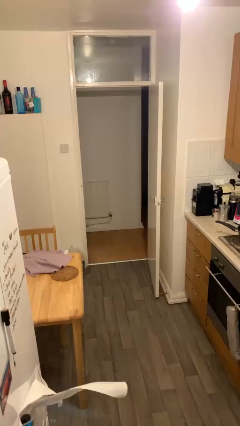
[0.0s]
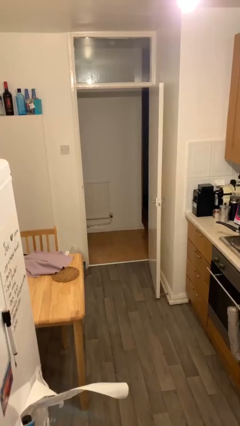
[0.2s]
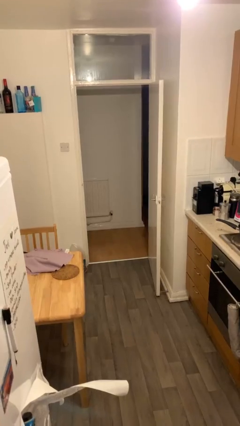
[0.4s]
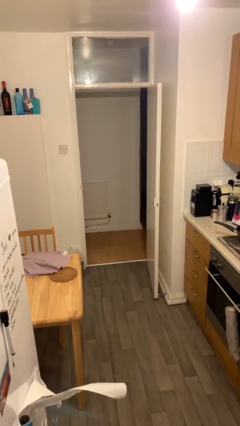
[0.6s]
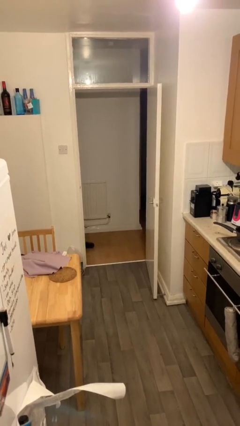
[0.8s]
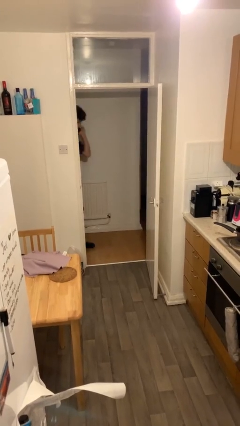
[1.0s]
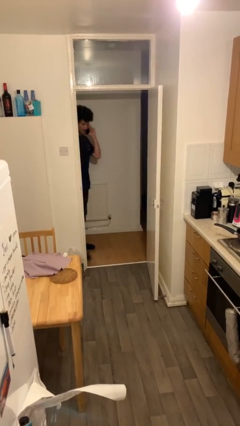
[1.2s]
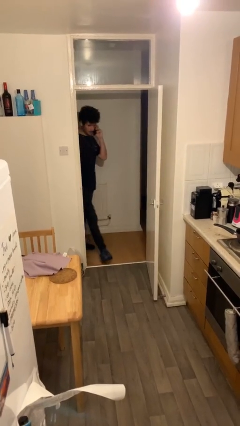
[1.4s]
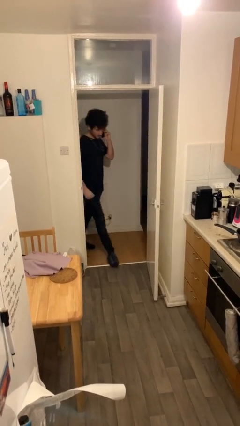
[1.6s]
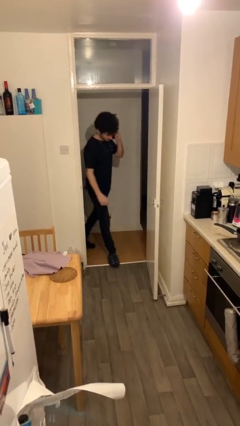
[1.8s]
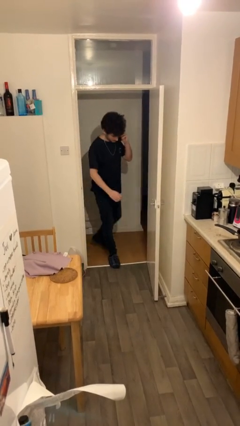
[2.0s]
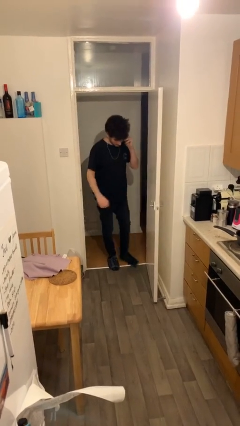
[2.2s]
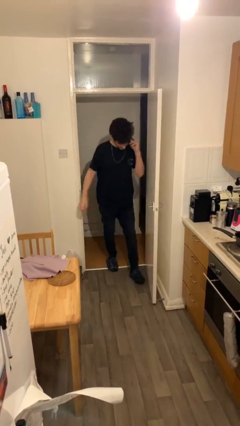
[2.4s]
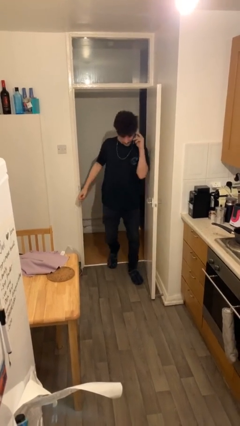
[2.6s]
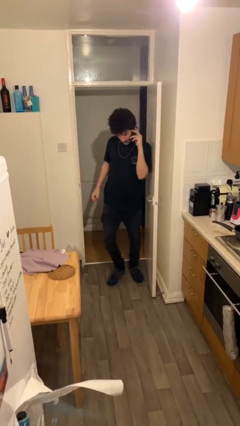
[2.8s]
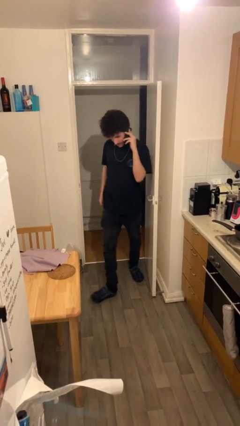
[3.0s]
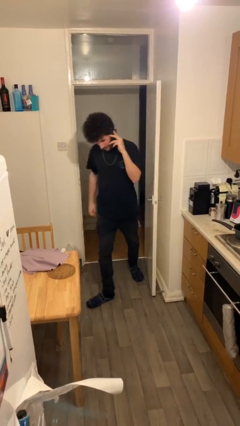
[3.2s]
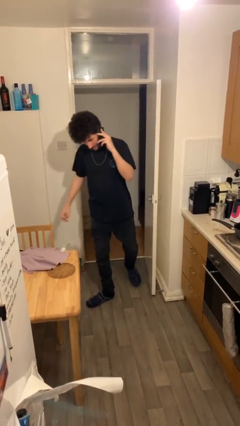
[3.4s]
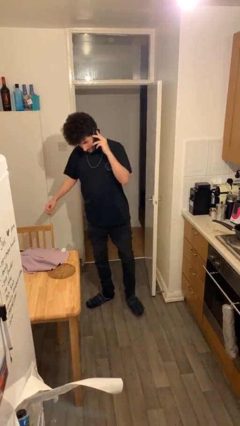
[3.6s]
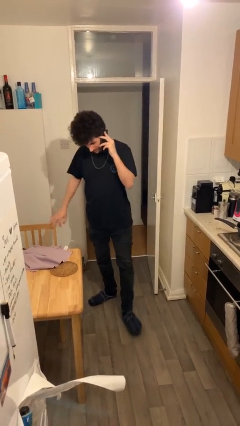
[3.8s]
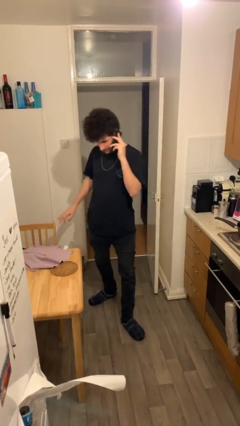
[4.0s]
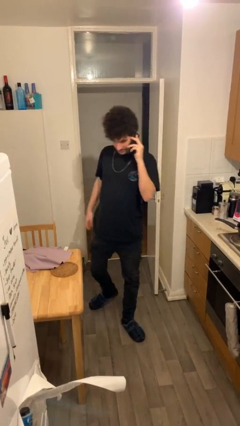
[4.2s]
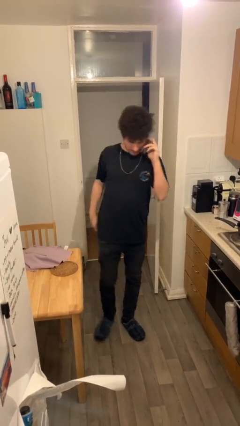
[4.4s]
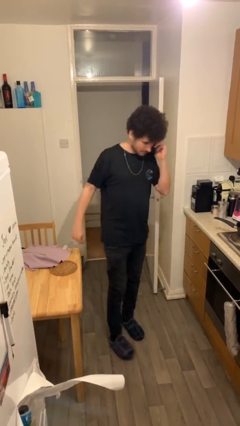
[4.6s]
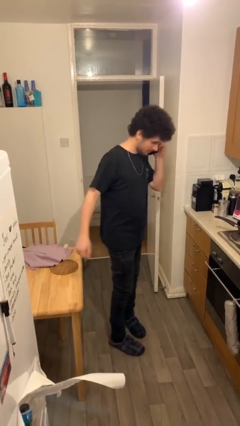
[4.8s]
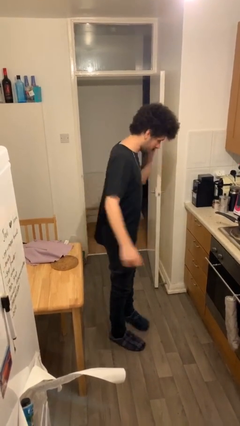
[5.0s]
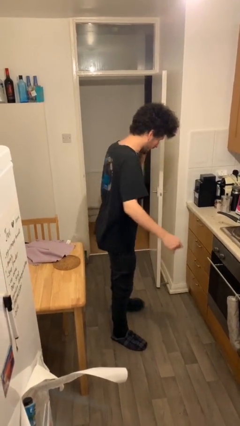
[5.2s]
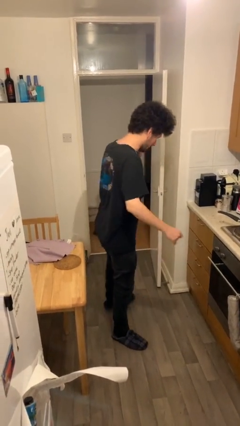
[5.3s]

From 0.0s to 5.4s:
person enters scene through structure

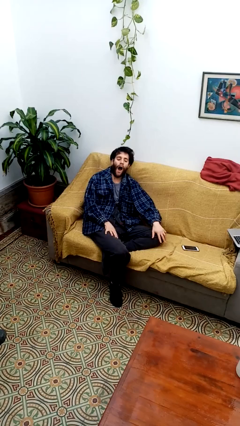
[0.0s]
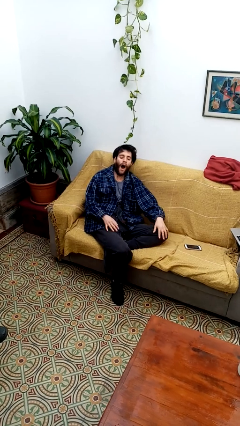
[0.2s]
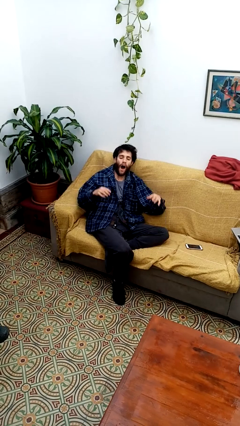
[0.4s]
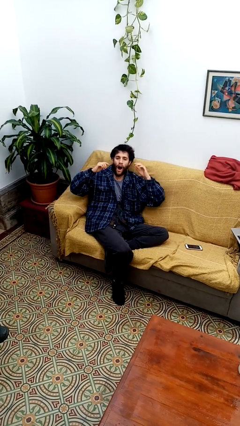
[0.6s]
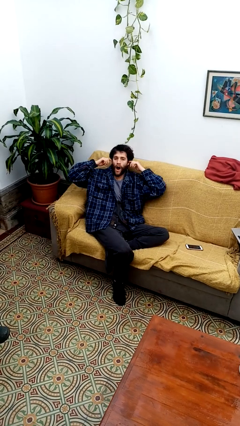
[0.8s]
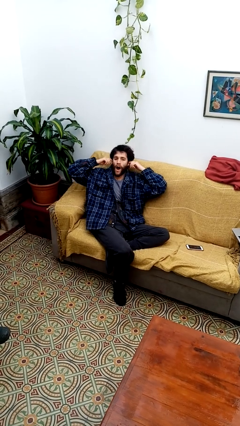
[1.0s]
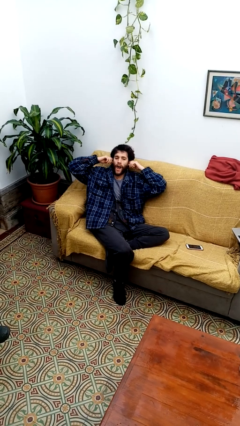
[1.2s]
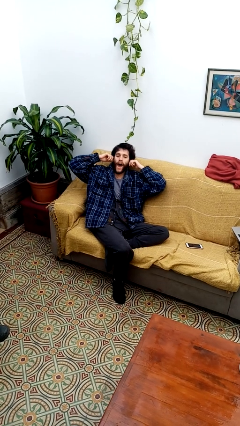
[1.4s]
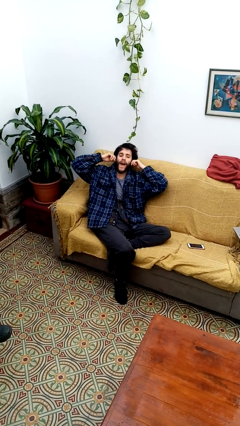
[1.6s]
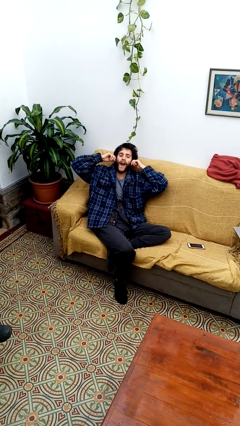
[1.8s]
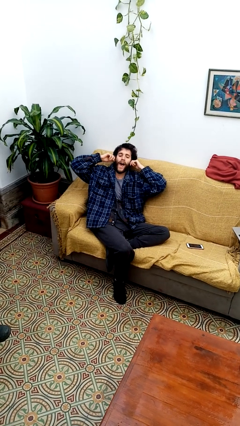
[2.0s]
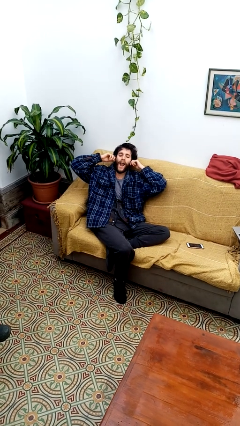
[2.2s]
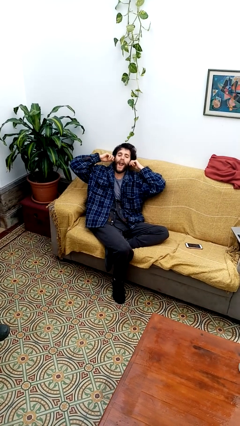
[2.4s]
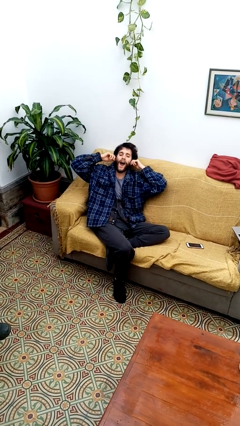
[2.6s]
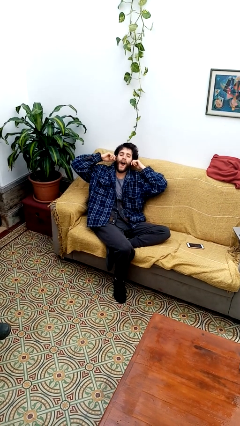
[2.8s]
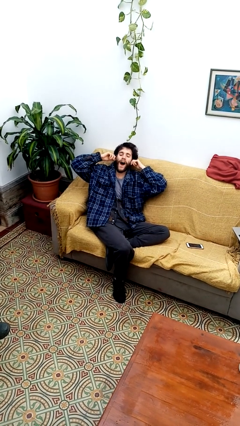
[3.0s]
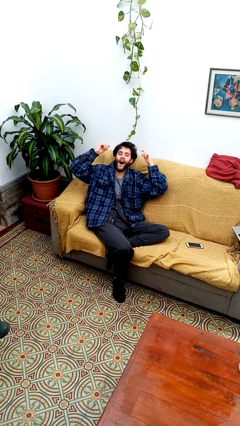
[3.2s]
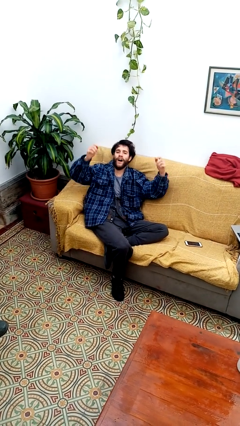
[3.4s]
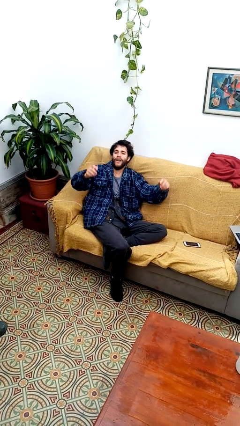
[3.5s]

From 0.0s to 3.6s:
person puts fingers in ear

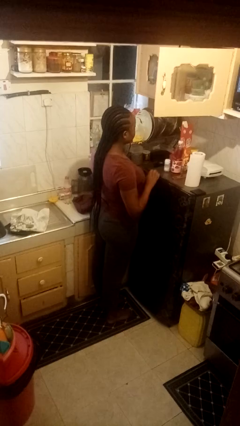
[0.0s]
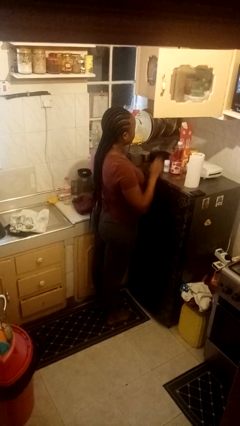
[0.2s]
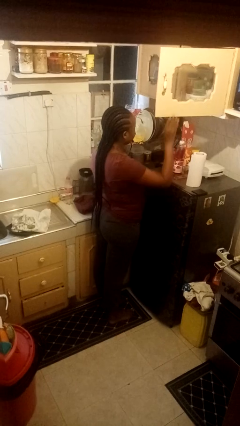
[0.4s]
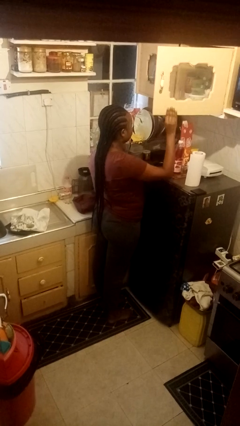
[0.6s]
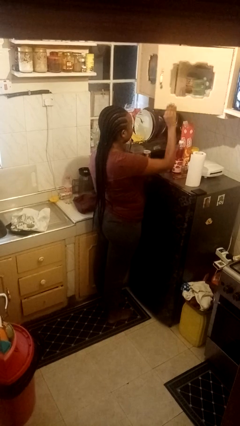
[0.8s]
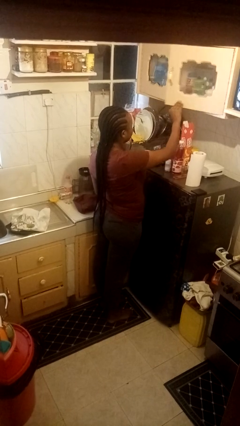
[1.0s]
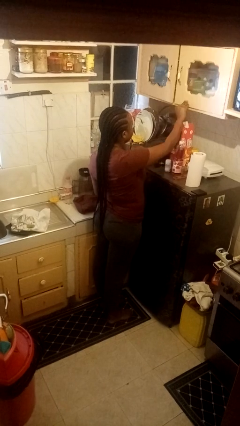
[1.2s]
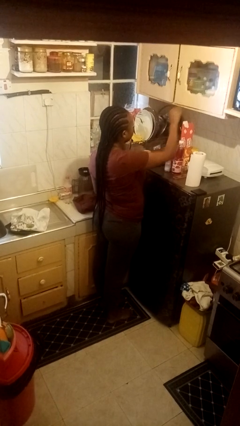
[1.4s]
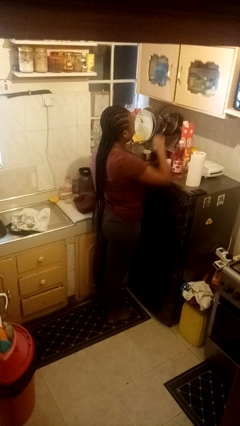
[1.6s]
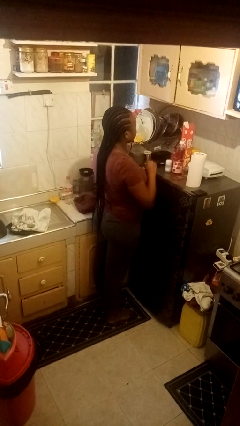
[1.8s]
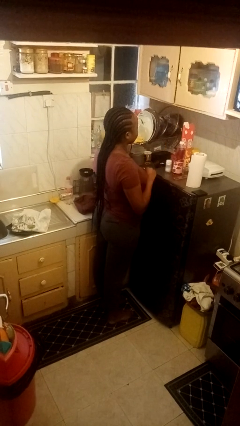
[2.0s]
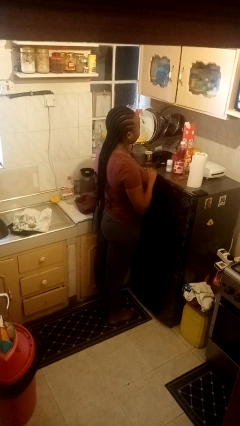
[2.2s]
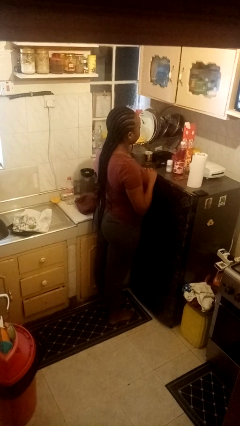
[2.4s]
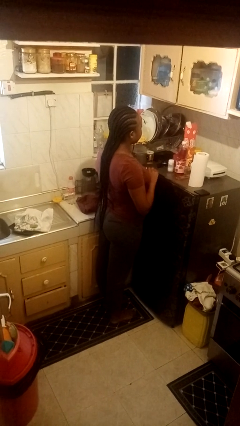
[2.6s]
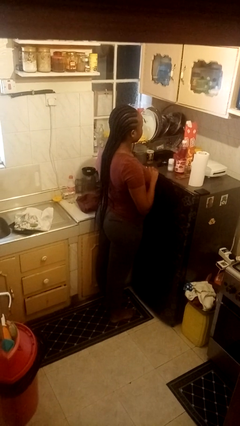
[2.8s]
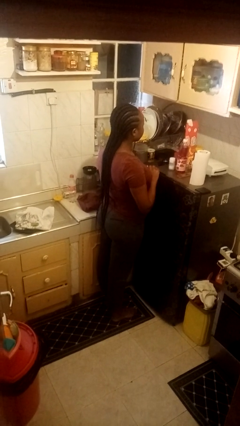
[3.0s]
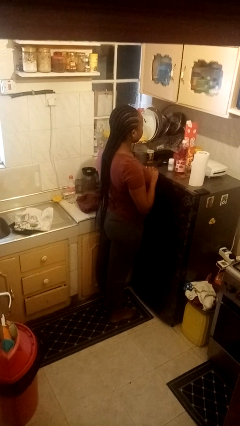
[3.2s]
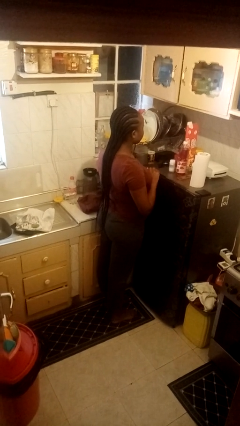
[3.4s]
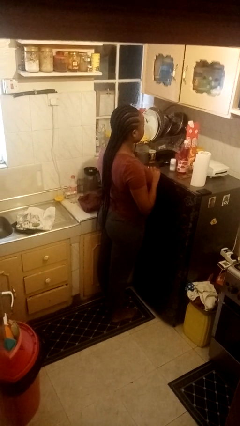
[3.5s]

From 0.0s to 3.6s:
person closes cabinet

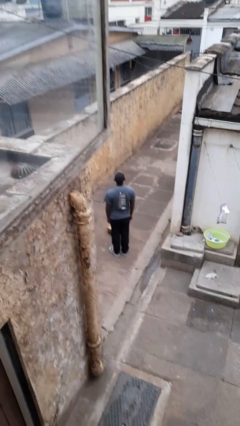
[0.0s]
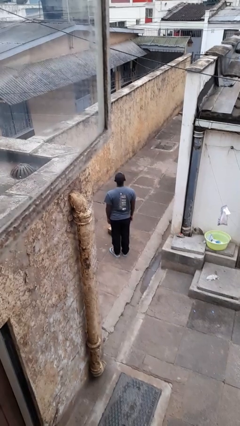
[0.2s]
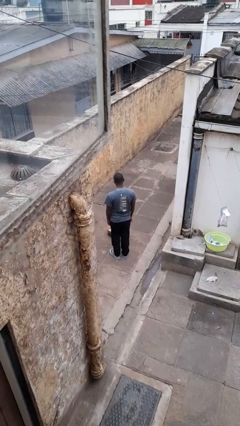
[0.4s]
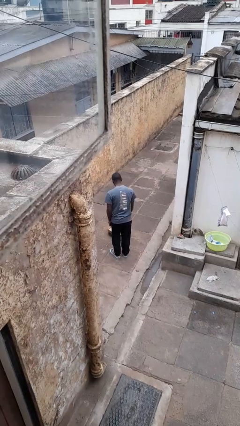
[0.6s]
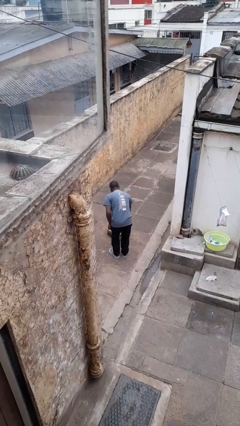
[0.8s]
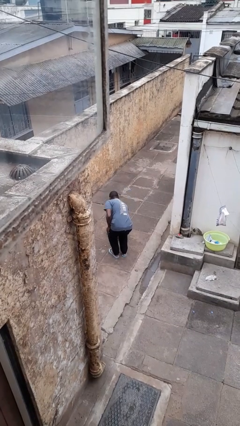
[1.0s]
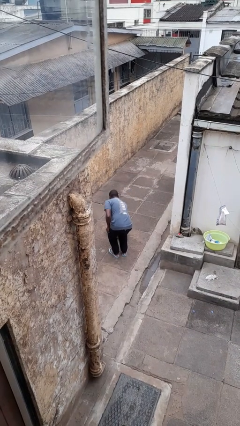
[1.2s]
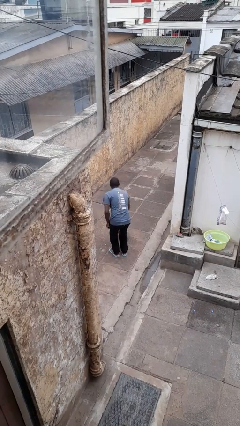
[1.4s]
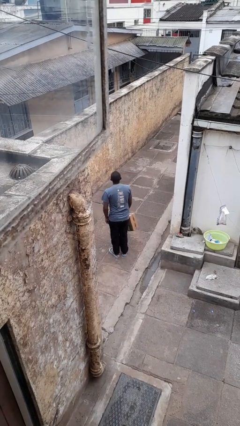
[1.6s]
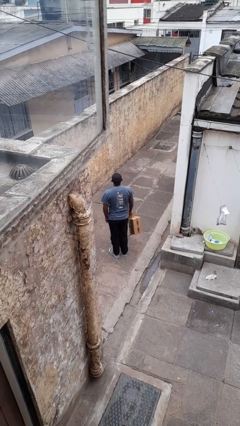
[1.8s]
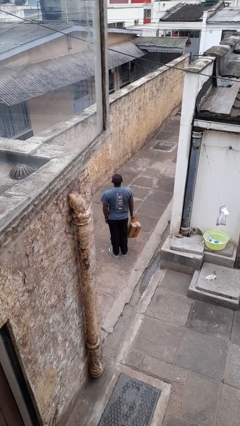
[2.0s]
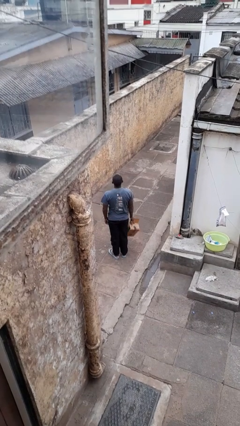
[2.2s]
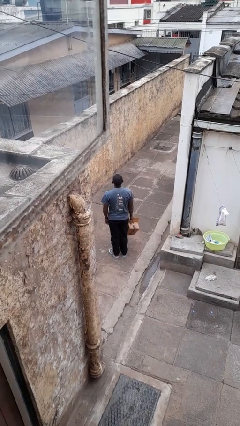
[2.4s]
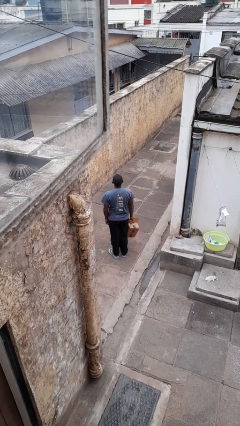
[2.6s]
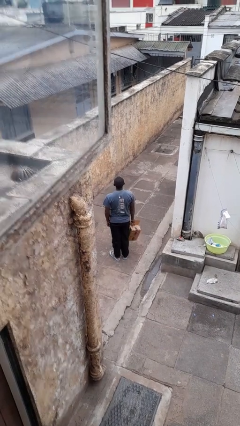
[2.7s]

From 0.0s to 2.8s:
person picks up object from floor

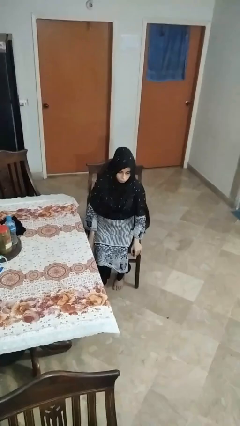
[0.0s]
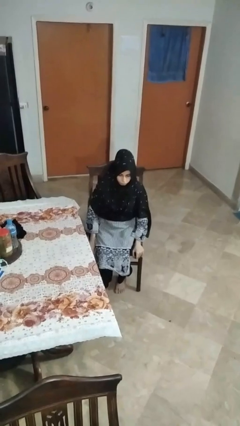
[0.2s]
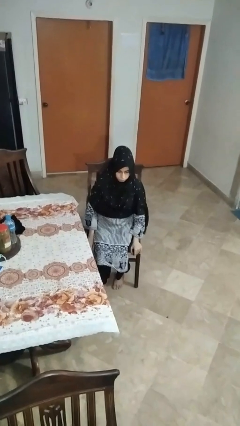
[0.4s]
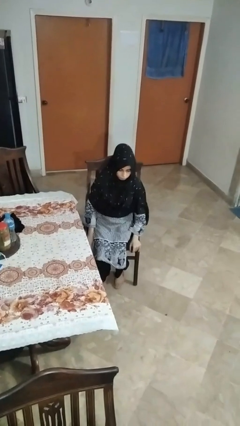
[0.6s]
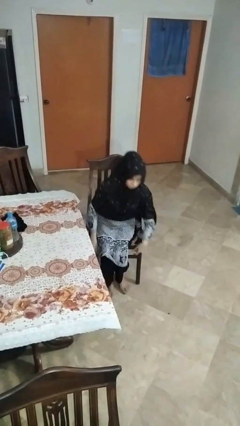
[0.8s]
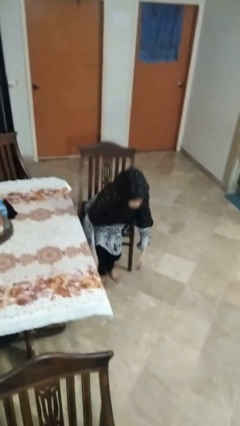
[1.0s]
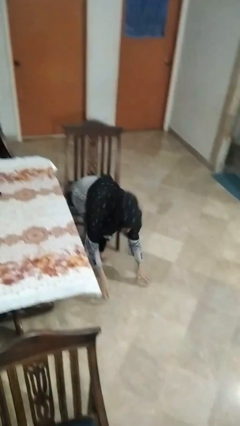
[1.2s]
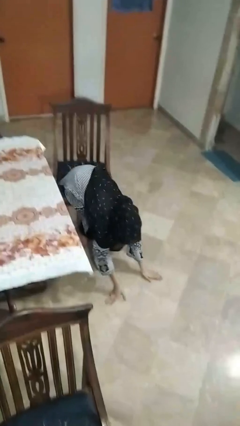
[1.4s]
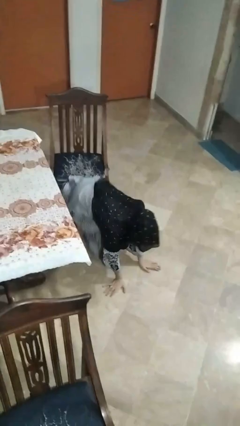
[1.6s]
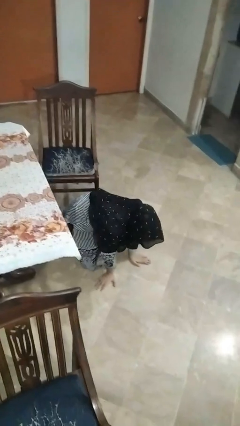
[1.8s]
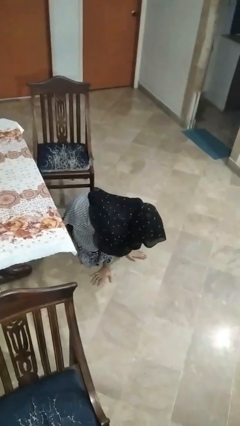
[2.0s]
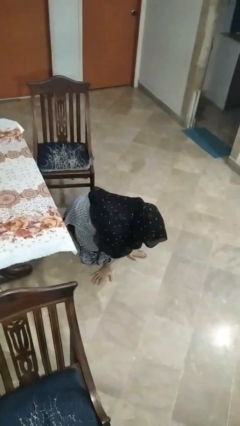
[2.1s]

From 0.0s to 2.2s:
person falls from chair
